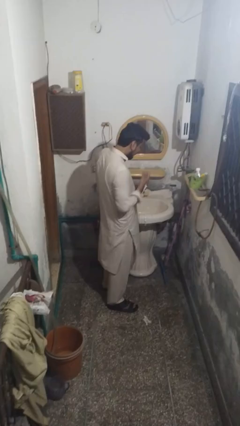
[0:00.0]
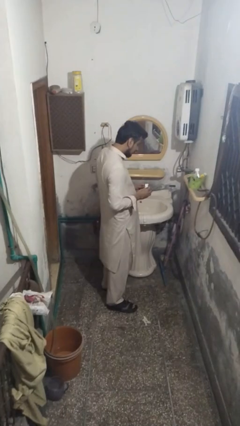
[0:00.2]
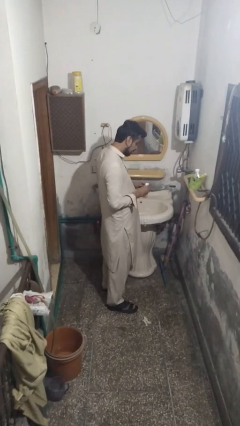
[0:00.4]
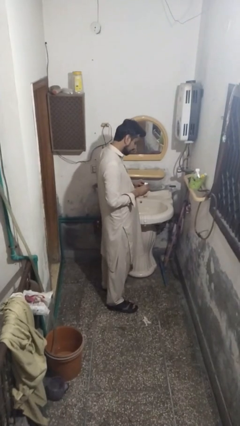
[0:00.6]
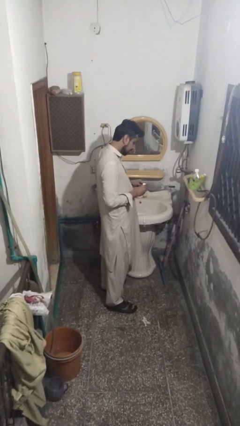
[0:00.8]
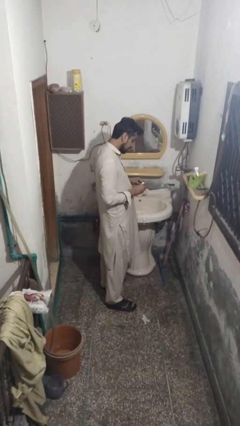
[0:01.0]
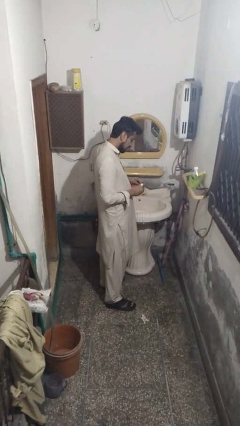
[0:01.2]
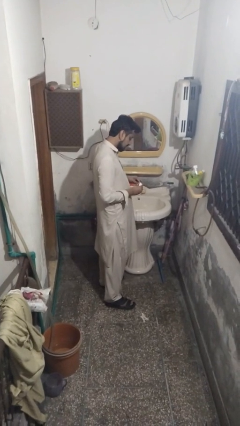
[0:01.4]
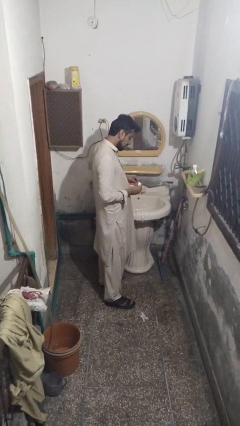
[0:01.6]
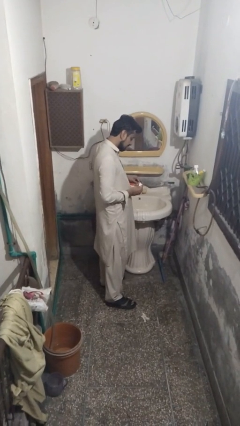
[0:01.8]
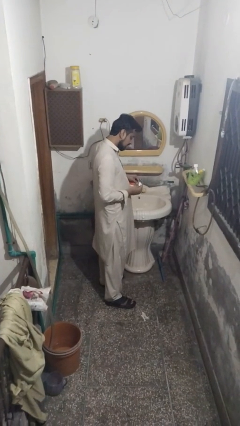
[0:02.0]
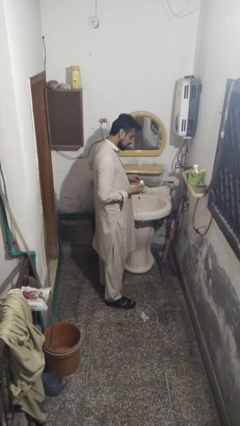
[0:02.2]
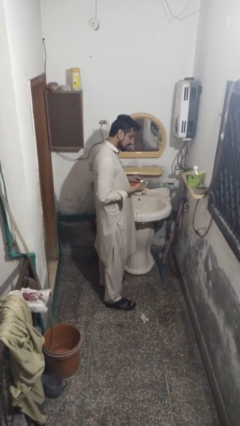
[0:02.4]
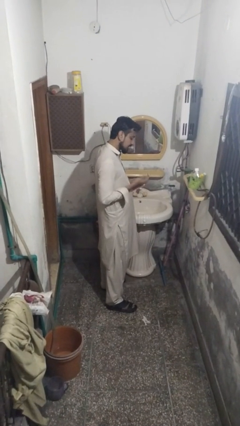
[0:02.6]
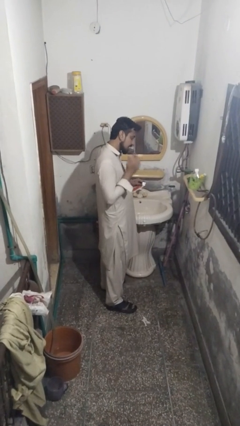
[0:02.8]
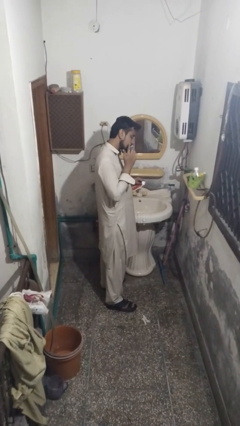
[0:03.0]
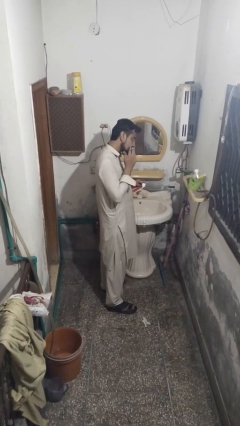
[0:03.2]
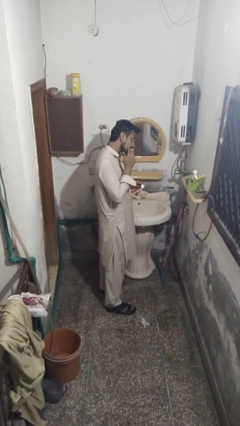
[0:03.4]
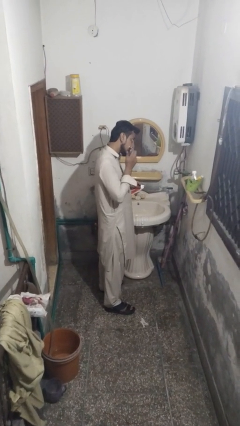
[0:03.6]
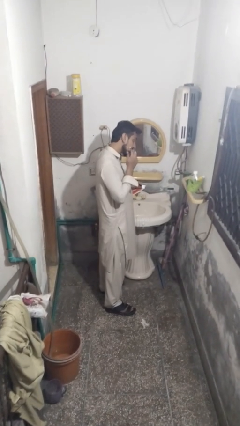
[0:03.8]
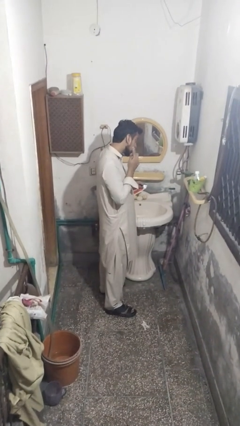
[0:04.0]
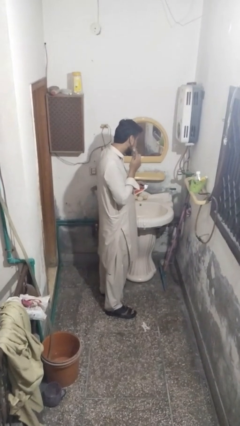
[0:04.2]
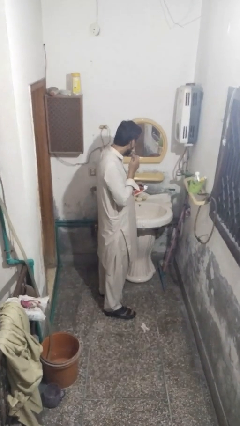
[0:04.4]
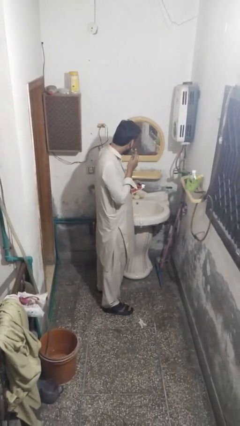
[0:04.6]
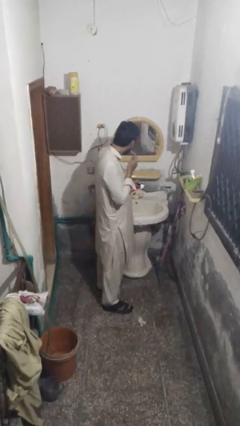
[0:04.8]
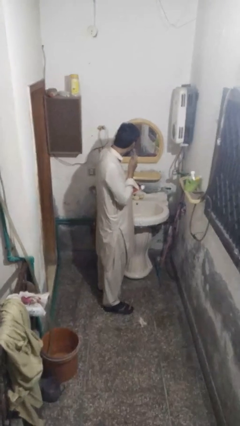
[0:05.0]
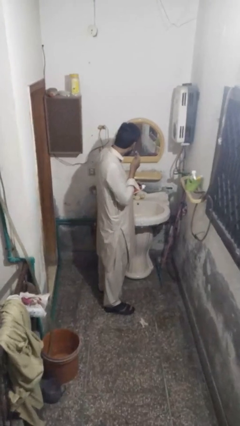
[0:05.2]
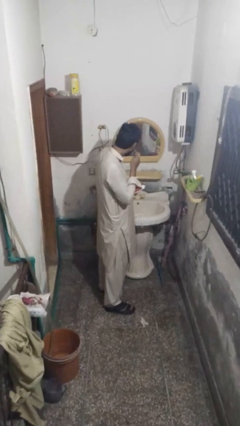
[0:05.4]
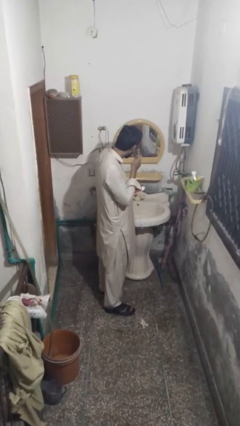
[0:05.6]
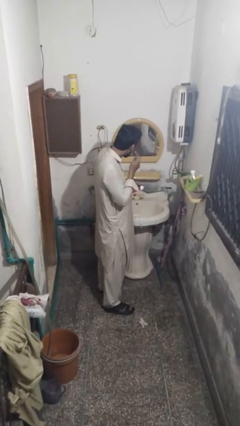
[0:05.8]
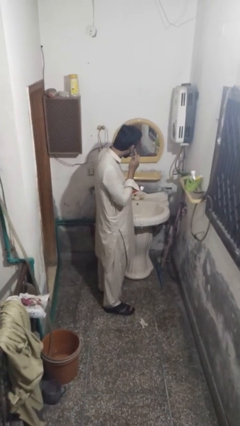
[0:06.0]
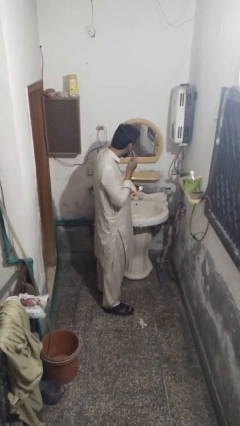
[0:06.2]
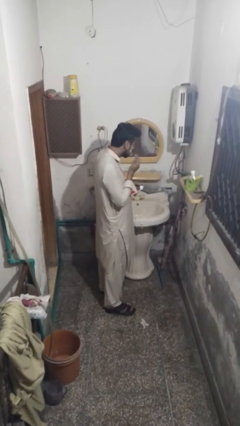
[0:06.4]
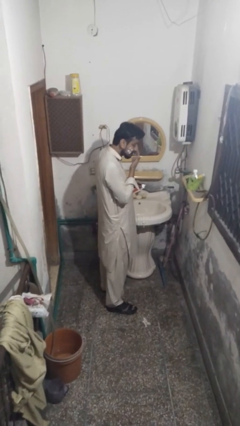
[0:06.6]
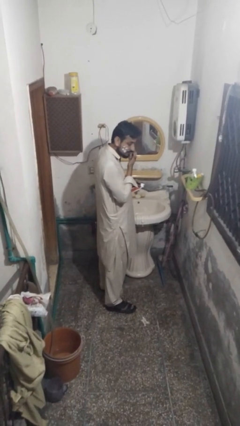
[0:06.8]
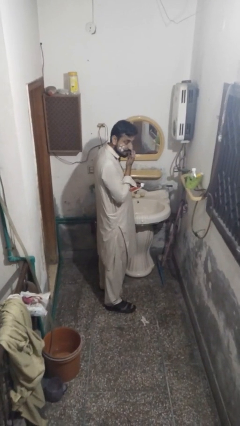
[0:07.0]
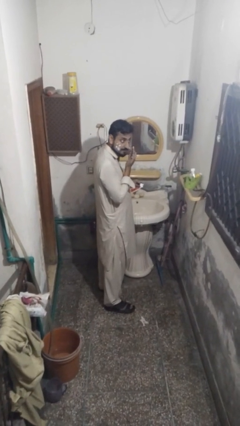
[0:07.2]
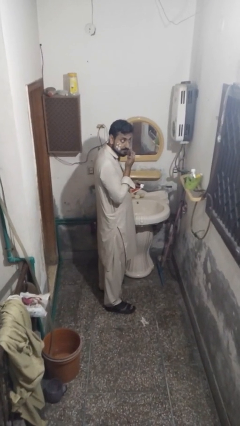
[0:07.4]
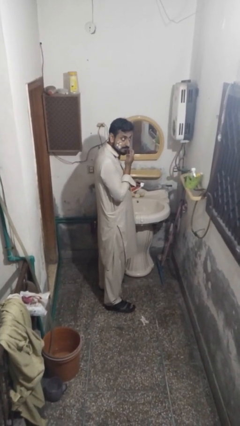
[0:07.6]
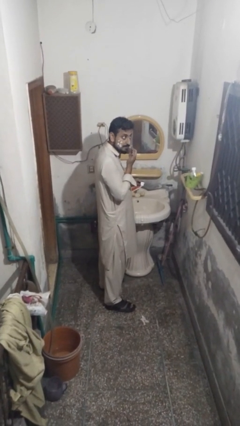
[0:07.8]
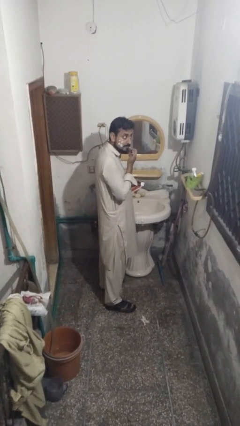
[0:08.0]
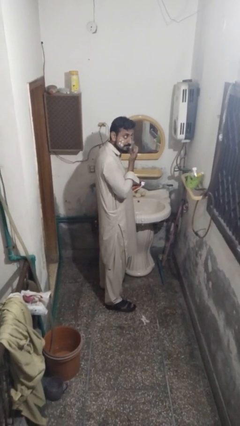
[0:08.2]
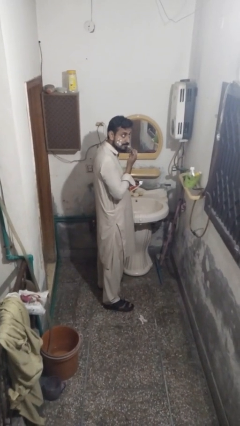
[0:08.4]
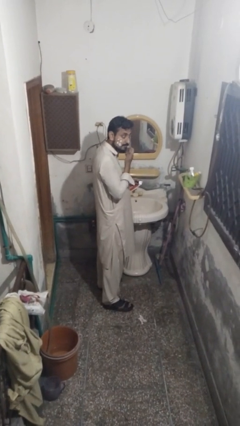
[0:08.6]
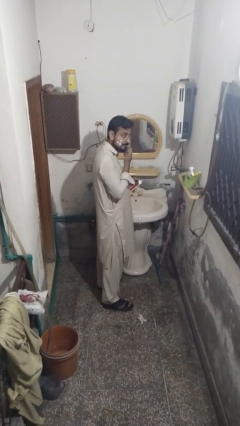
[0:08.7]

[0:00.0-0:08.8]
person applies shaving cream

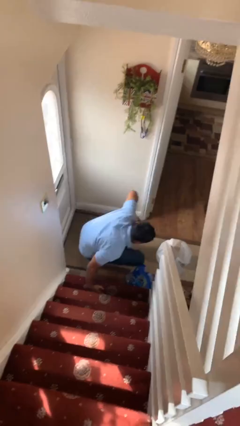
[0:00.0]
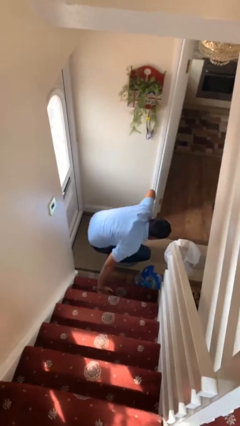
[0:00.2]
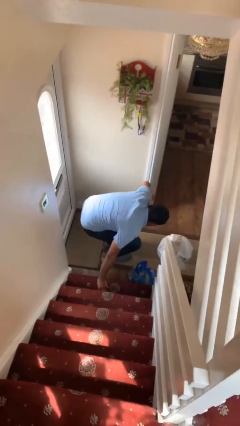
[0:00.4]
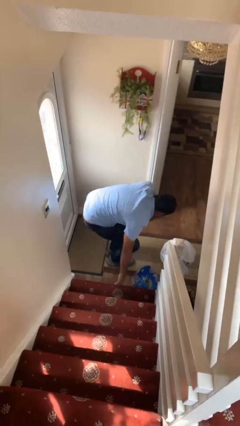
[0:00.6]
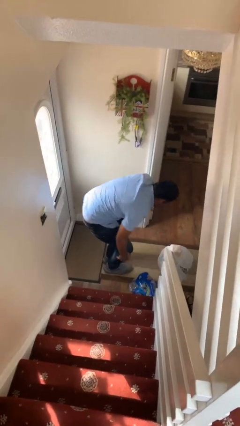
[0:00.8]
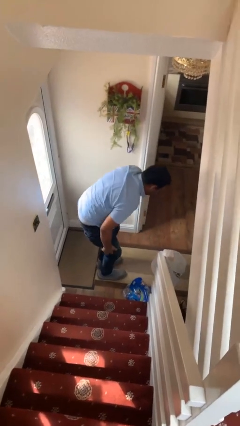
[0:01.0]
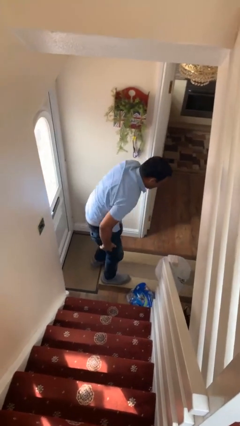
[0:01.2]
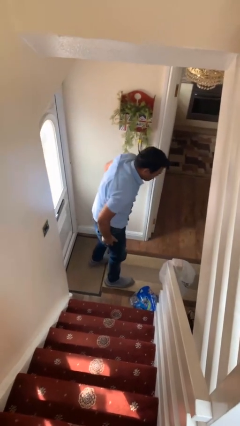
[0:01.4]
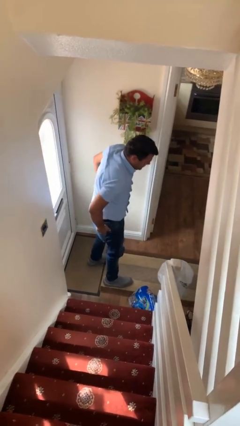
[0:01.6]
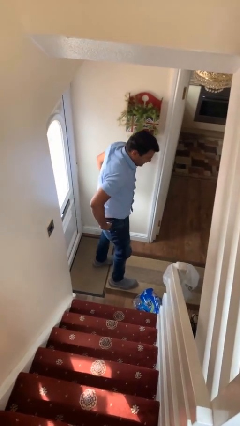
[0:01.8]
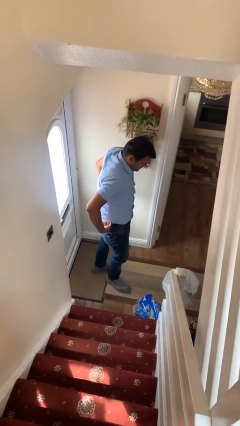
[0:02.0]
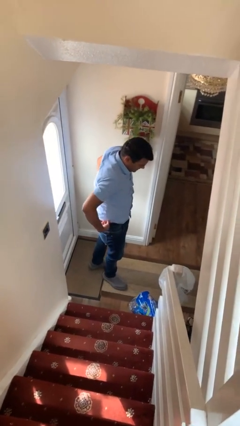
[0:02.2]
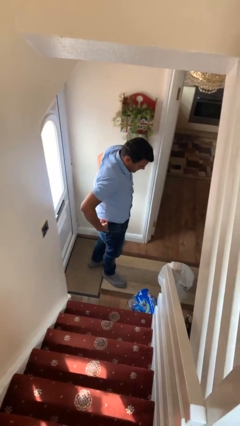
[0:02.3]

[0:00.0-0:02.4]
person stands up from floor

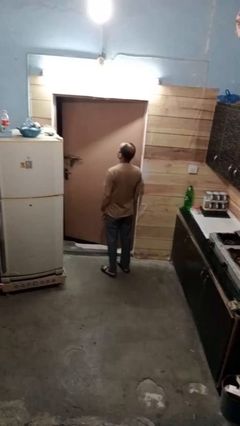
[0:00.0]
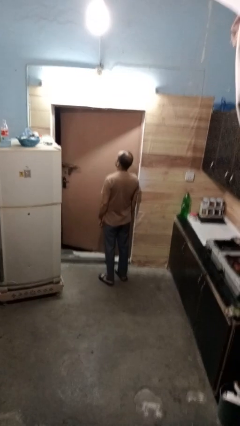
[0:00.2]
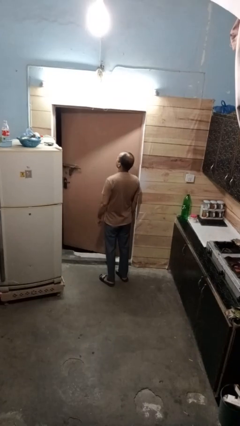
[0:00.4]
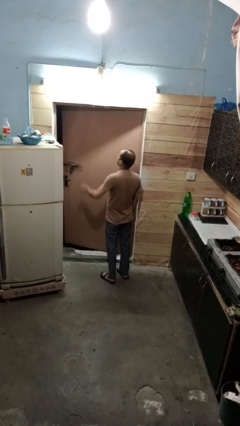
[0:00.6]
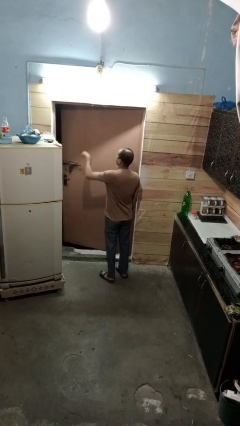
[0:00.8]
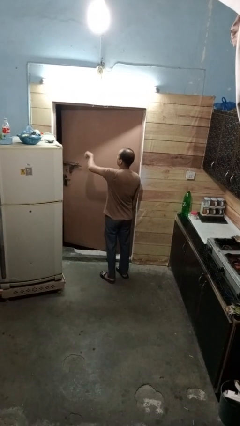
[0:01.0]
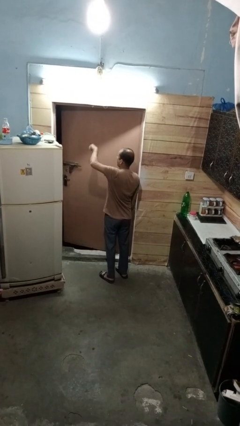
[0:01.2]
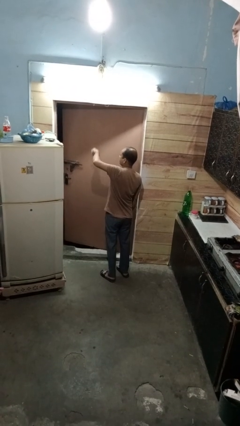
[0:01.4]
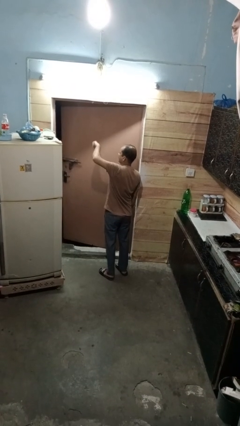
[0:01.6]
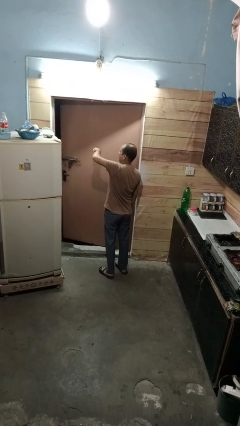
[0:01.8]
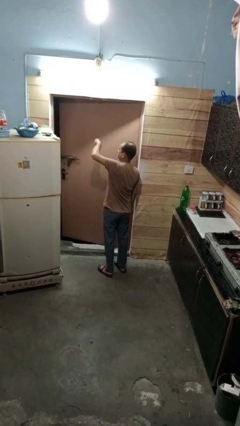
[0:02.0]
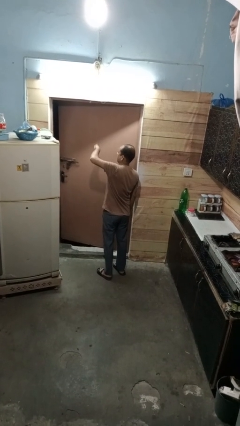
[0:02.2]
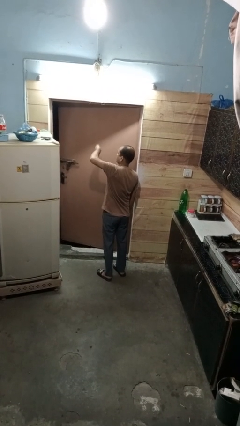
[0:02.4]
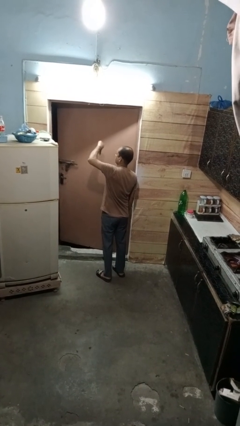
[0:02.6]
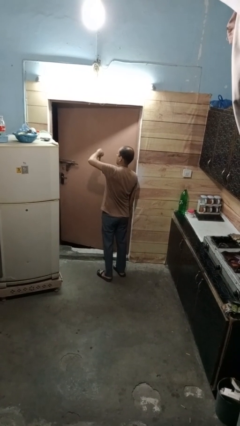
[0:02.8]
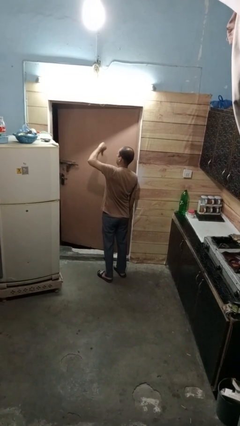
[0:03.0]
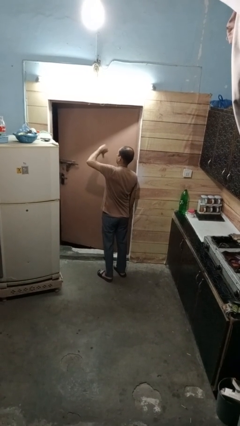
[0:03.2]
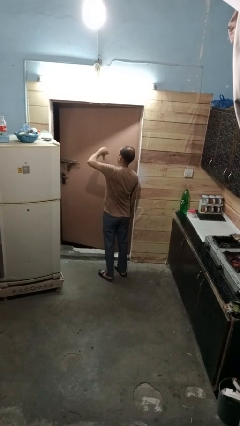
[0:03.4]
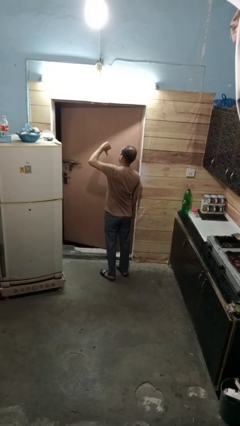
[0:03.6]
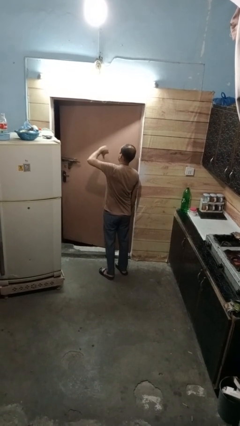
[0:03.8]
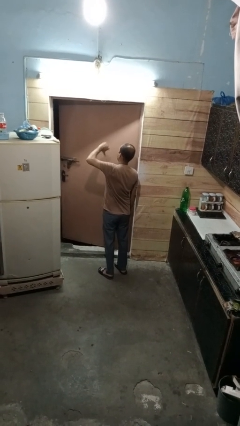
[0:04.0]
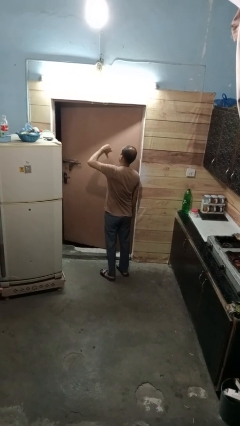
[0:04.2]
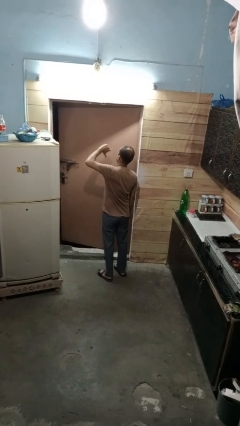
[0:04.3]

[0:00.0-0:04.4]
person gestures hang loose

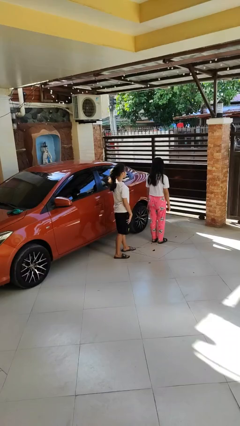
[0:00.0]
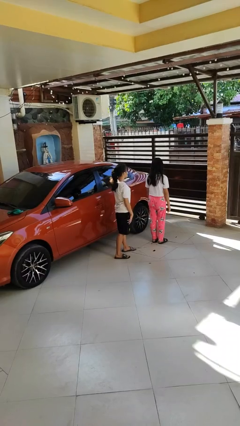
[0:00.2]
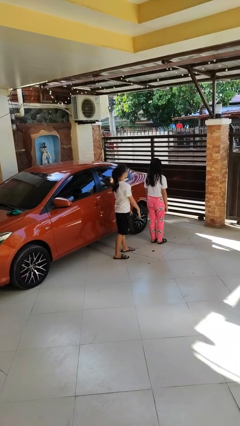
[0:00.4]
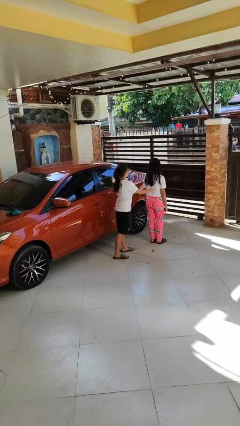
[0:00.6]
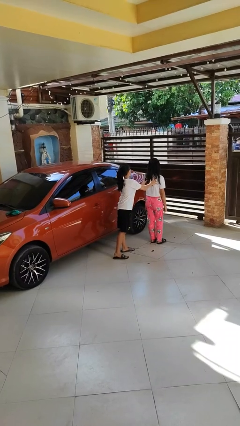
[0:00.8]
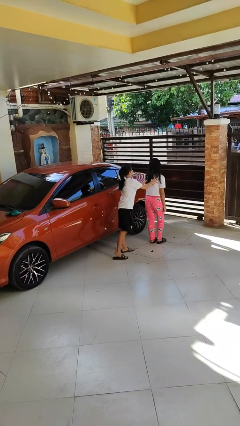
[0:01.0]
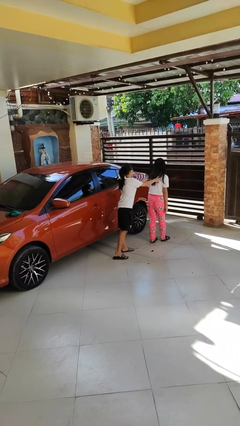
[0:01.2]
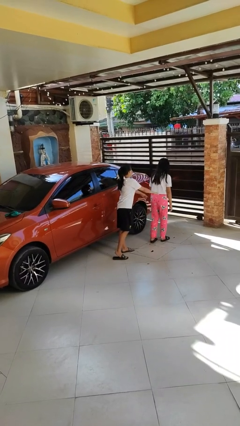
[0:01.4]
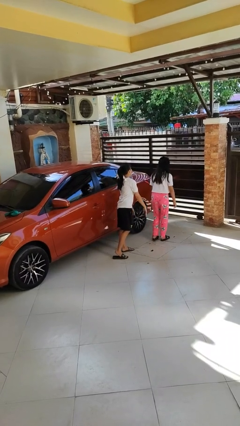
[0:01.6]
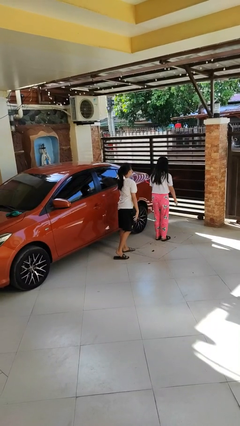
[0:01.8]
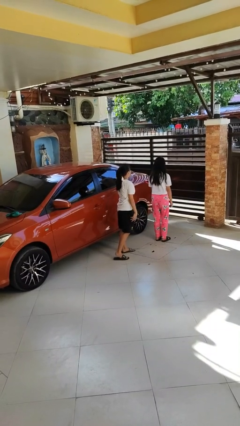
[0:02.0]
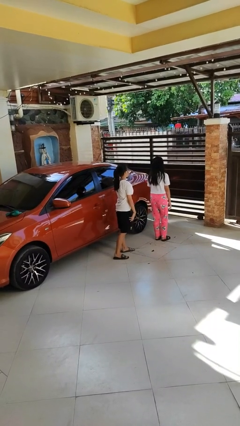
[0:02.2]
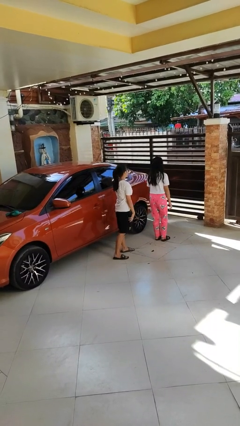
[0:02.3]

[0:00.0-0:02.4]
person shoves person
